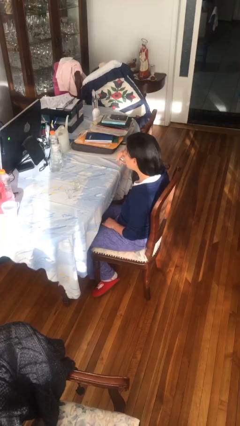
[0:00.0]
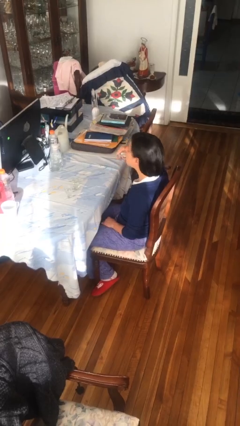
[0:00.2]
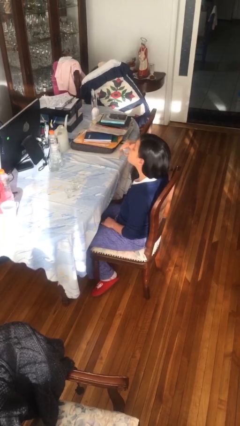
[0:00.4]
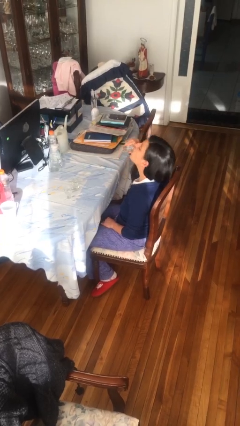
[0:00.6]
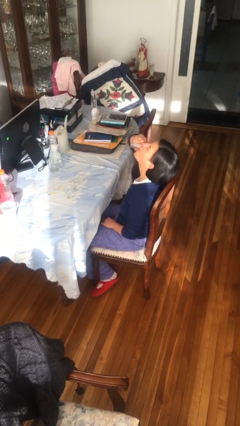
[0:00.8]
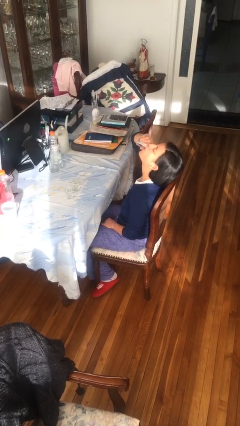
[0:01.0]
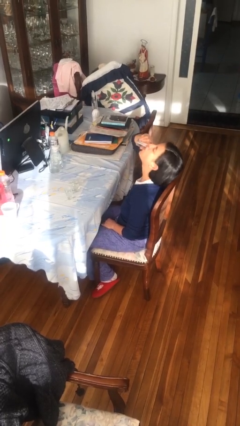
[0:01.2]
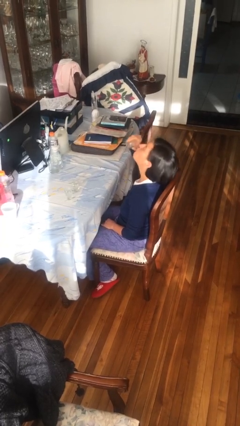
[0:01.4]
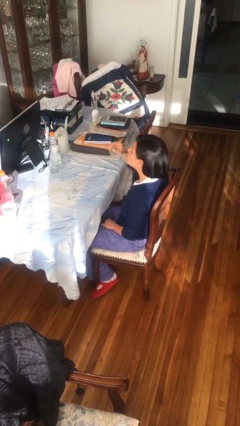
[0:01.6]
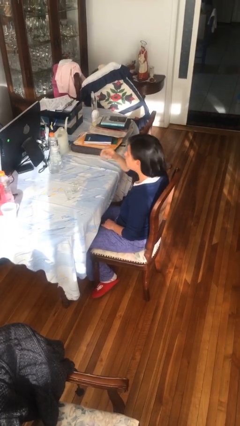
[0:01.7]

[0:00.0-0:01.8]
person drinks from shotglass

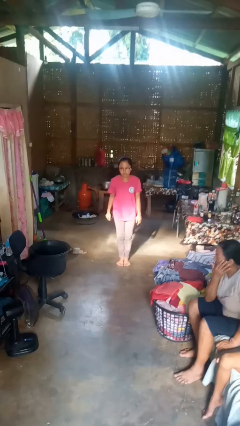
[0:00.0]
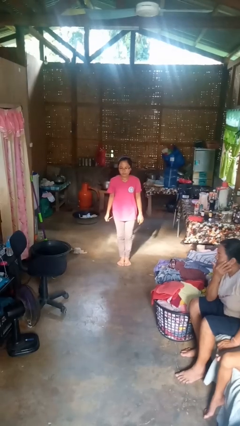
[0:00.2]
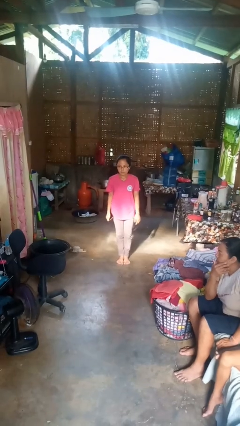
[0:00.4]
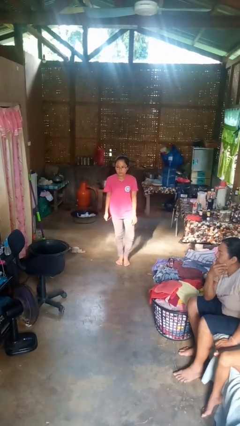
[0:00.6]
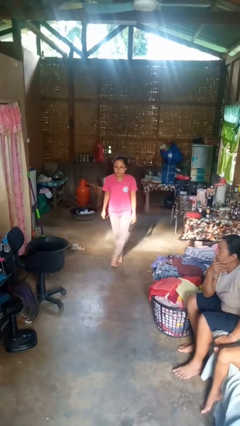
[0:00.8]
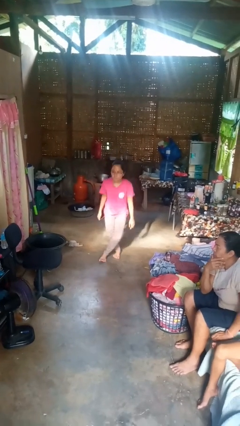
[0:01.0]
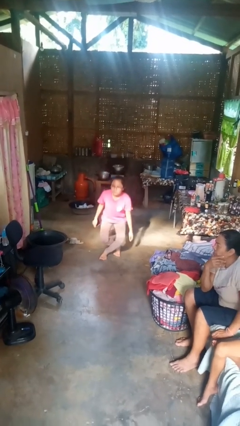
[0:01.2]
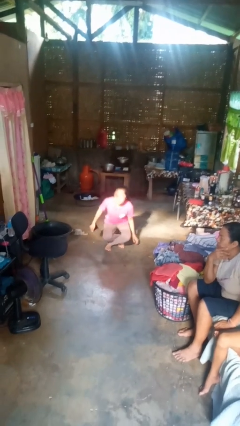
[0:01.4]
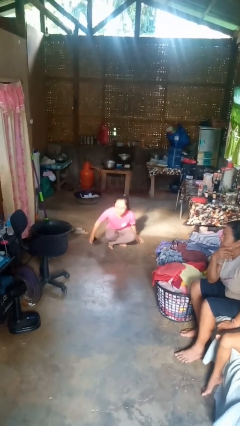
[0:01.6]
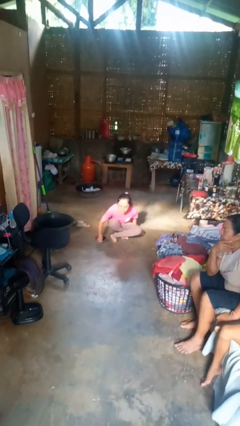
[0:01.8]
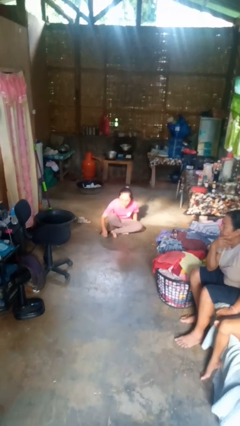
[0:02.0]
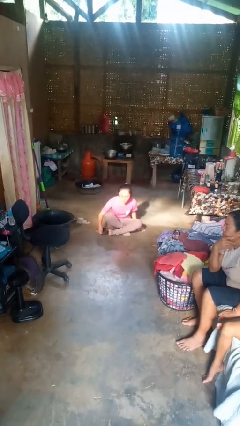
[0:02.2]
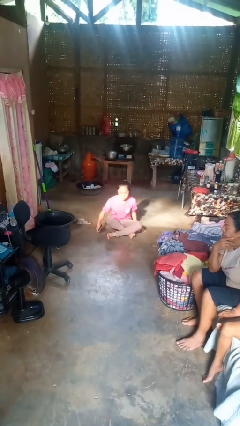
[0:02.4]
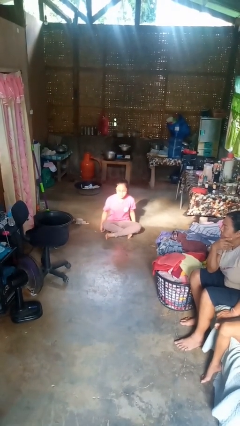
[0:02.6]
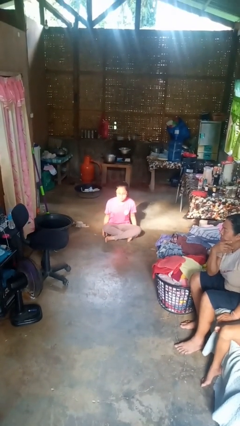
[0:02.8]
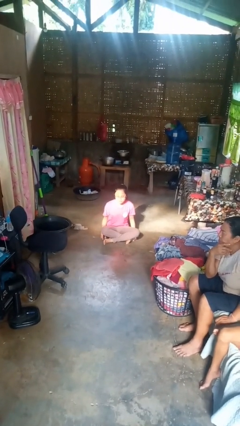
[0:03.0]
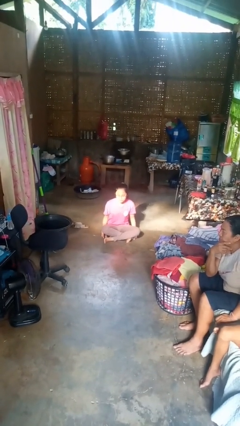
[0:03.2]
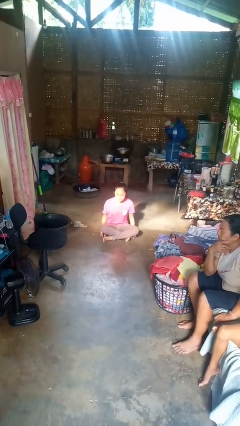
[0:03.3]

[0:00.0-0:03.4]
person sits crisscross

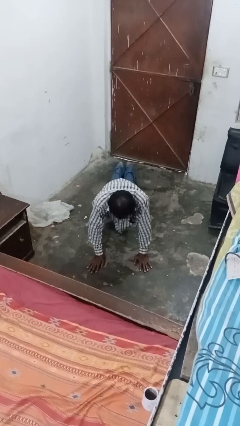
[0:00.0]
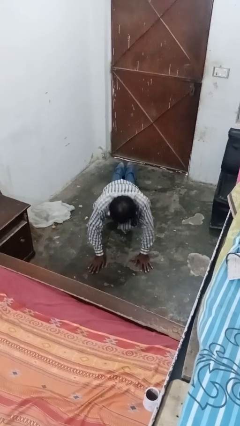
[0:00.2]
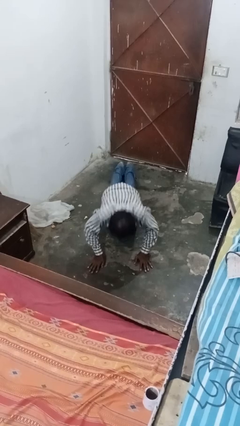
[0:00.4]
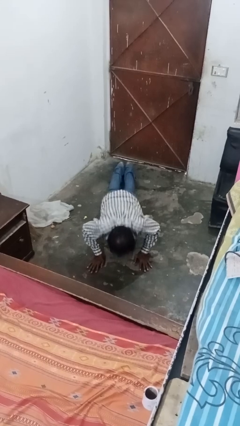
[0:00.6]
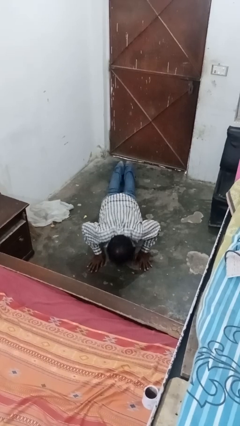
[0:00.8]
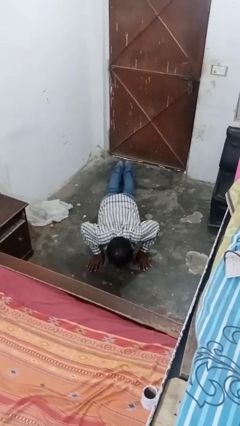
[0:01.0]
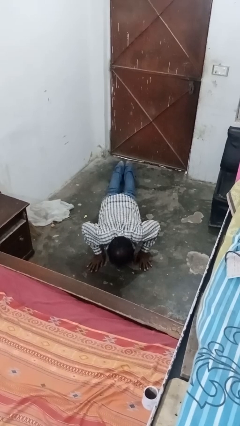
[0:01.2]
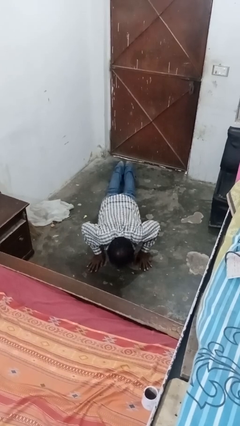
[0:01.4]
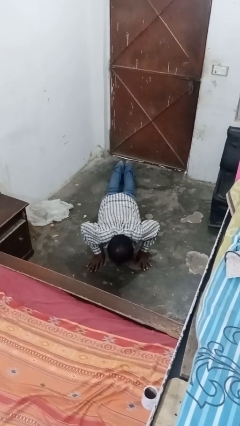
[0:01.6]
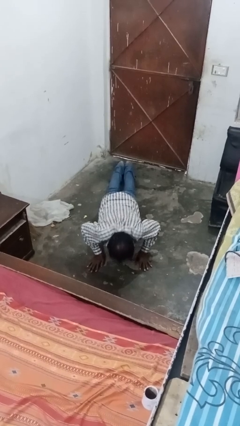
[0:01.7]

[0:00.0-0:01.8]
person exercises with pushup

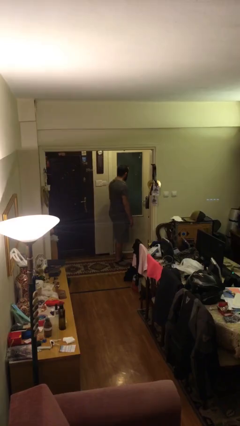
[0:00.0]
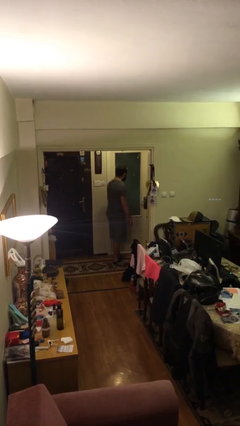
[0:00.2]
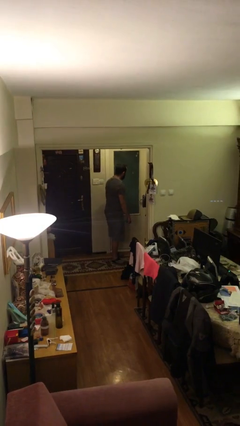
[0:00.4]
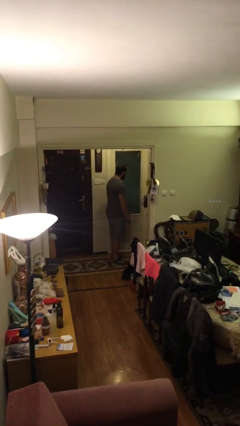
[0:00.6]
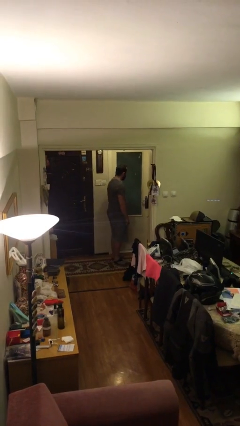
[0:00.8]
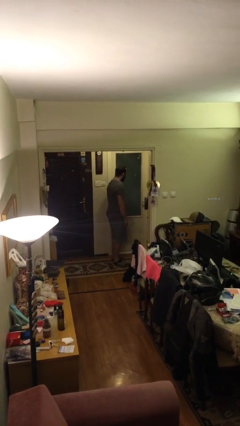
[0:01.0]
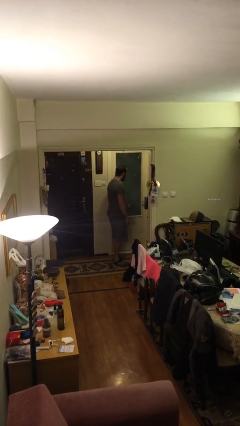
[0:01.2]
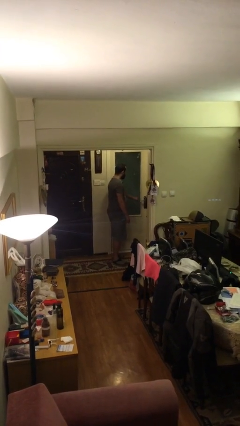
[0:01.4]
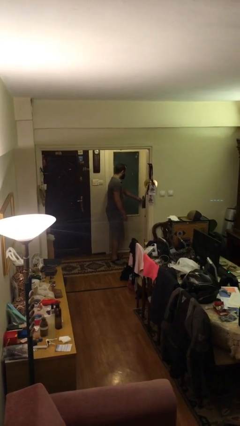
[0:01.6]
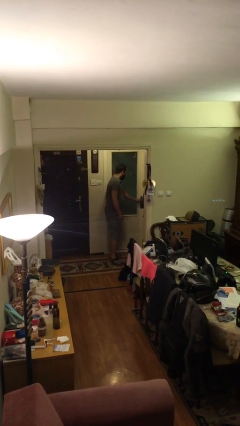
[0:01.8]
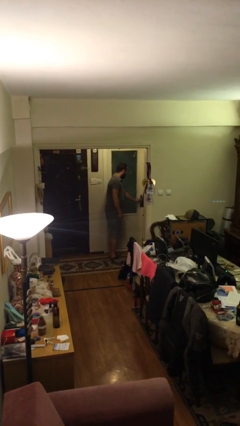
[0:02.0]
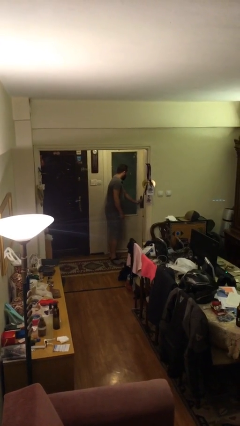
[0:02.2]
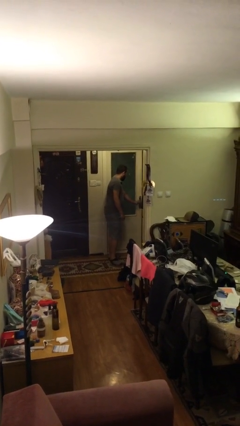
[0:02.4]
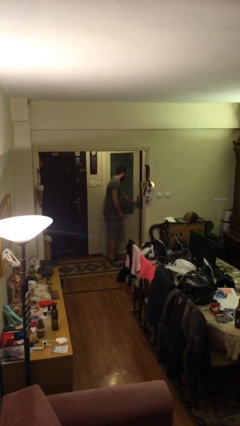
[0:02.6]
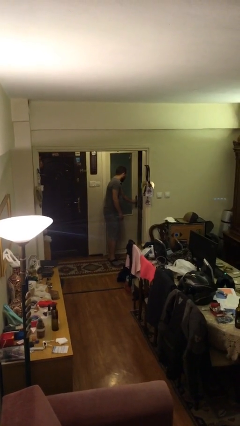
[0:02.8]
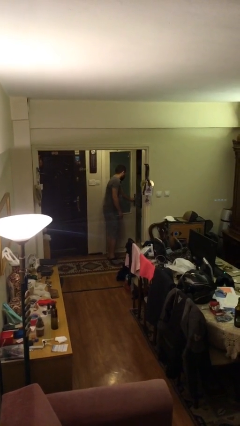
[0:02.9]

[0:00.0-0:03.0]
person opens facility door

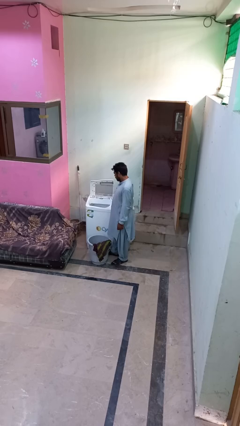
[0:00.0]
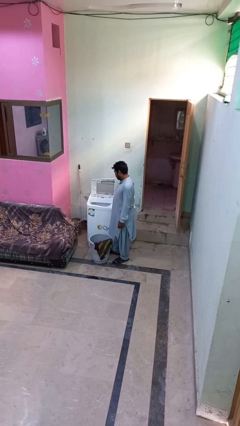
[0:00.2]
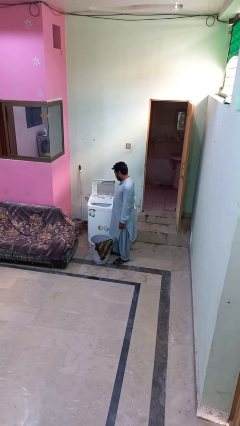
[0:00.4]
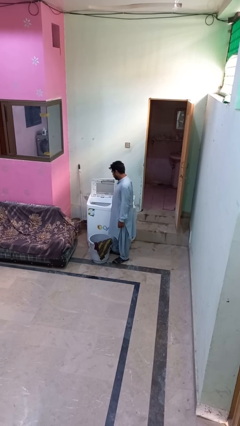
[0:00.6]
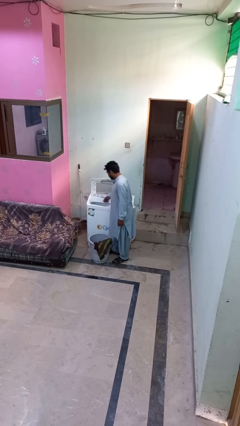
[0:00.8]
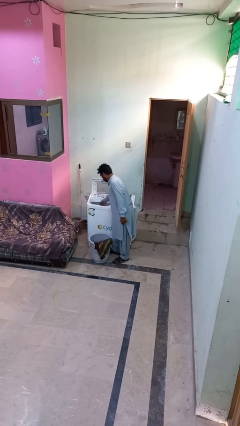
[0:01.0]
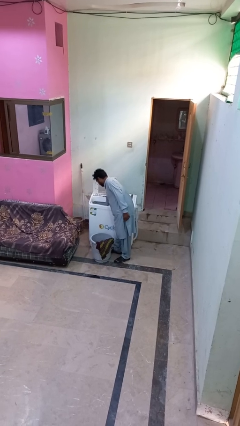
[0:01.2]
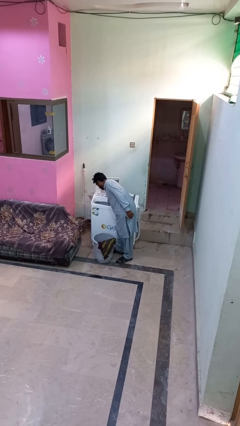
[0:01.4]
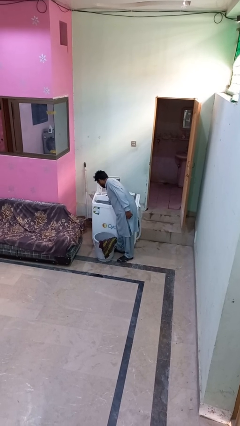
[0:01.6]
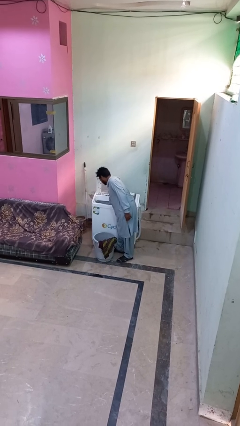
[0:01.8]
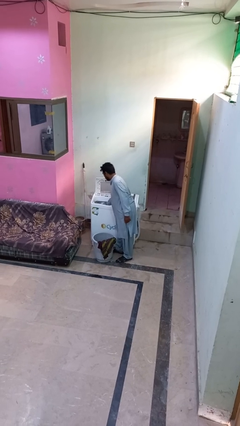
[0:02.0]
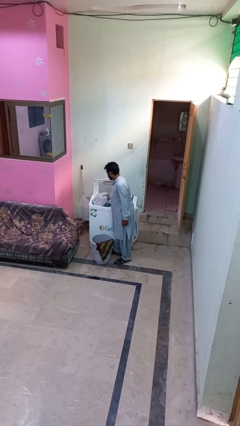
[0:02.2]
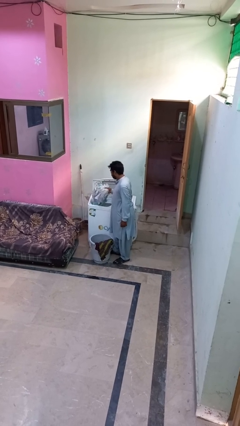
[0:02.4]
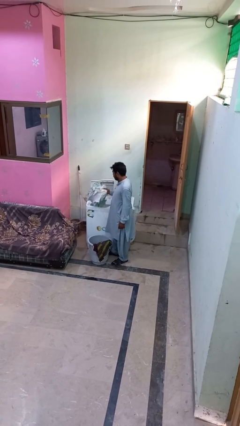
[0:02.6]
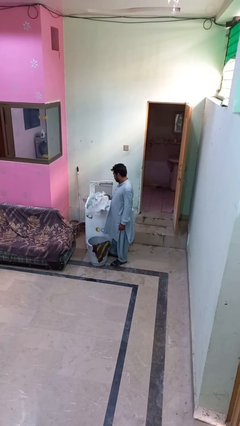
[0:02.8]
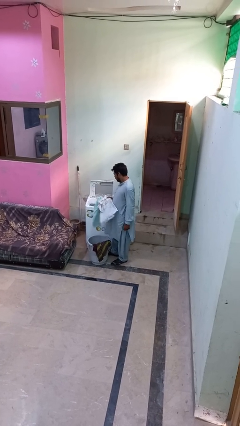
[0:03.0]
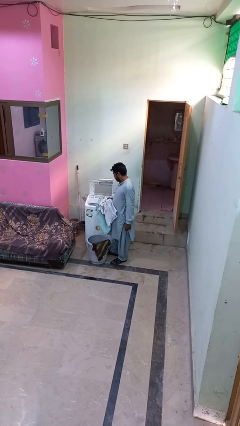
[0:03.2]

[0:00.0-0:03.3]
person unloads clotheswasher

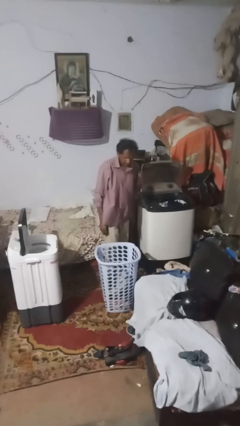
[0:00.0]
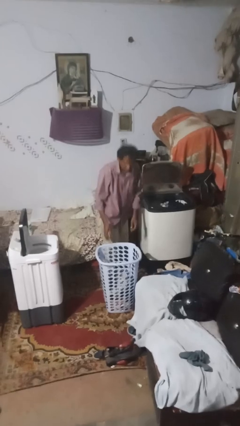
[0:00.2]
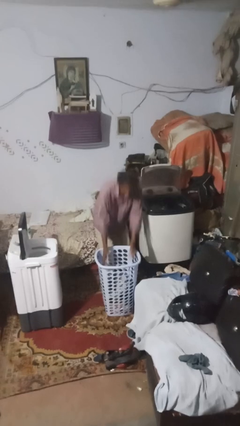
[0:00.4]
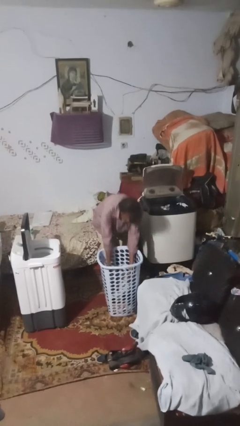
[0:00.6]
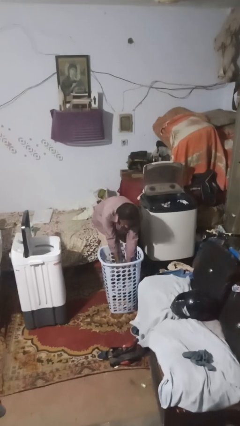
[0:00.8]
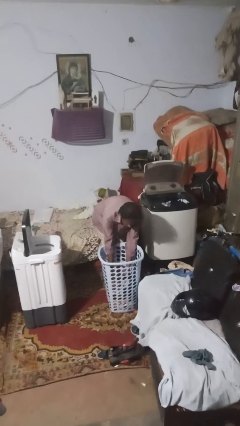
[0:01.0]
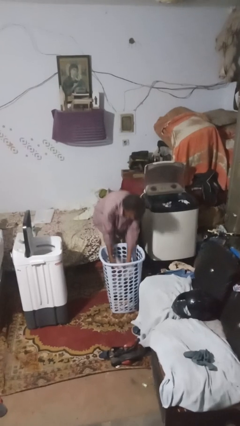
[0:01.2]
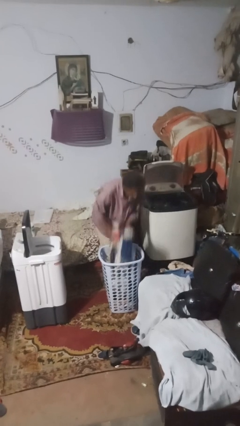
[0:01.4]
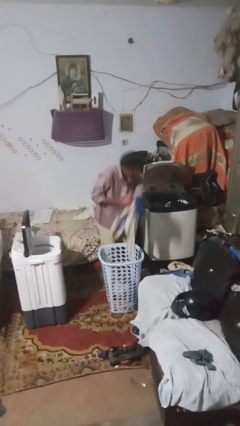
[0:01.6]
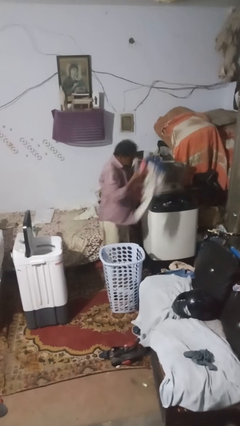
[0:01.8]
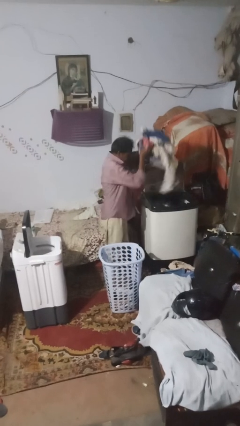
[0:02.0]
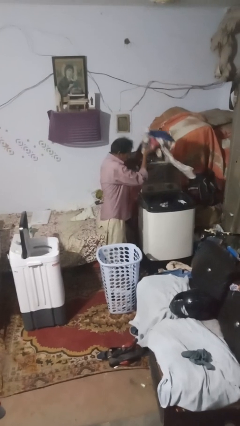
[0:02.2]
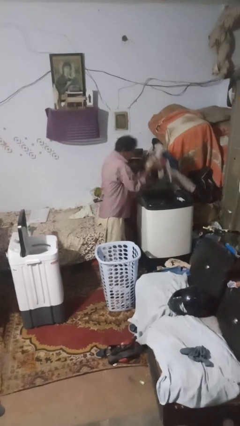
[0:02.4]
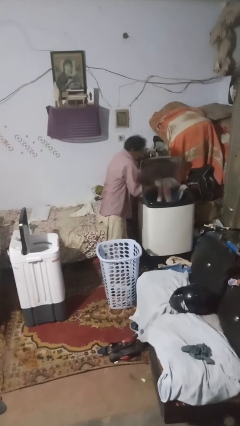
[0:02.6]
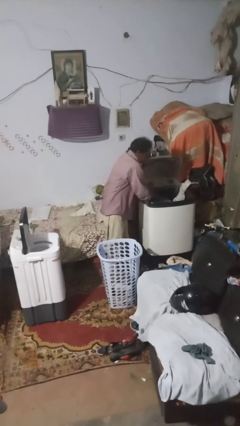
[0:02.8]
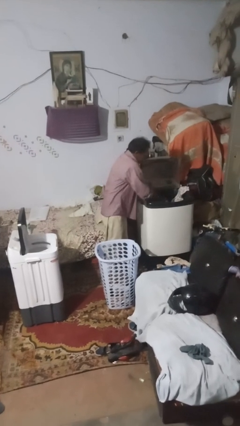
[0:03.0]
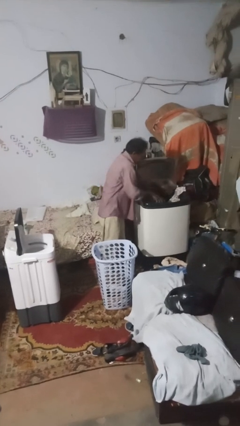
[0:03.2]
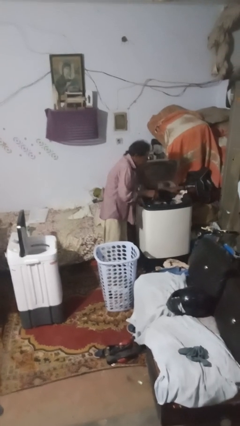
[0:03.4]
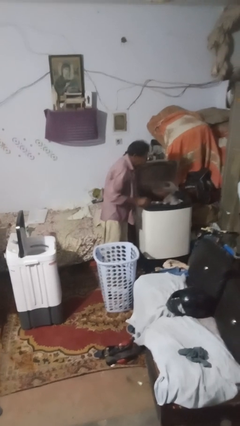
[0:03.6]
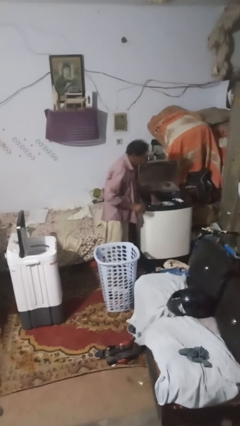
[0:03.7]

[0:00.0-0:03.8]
person loads clotheswasher
